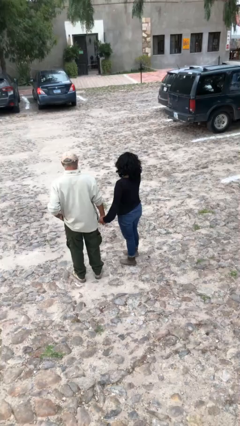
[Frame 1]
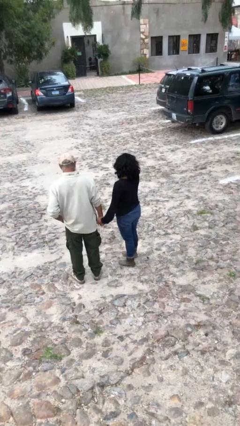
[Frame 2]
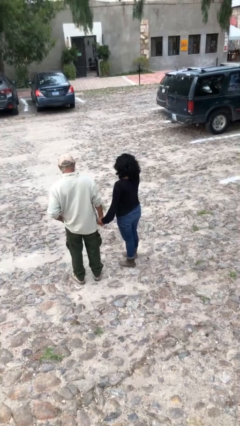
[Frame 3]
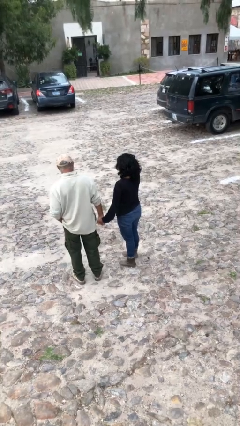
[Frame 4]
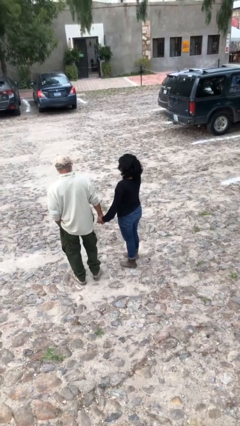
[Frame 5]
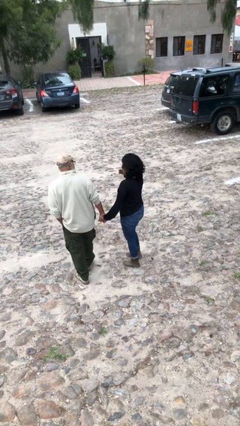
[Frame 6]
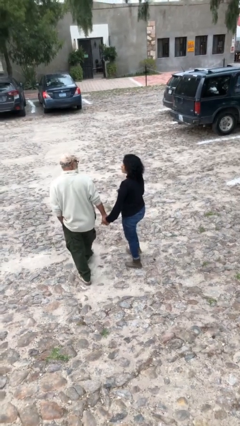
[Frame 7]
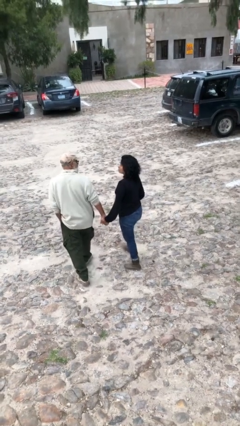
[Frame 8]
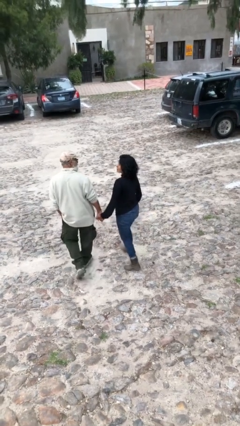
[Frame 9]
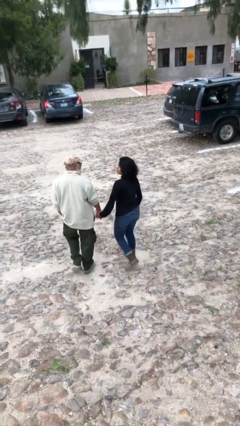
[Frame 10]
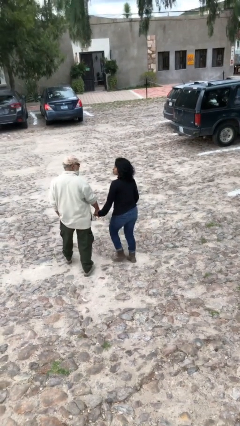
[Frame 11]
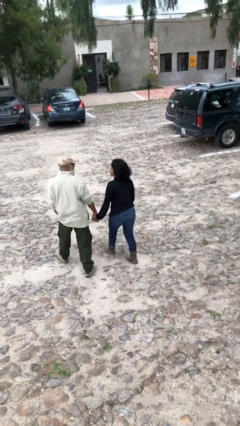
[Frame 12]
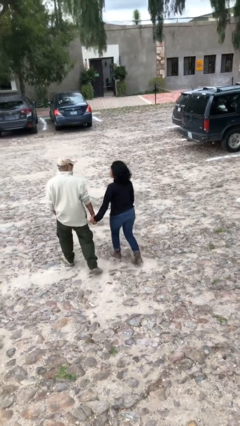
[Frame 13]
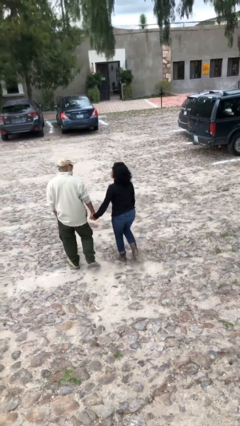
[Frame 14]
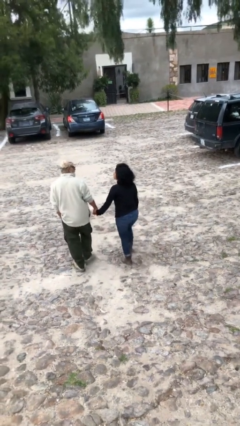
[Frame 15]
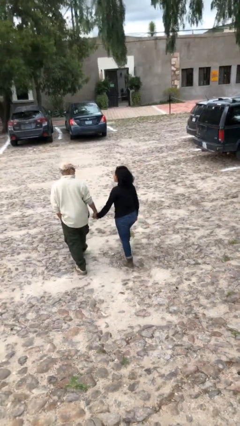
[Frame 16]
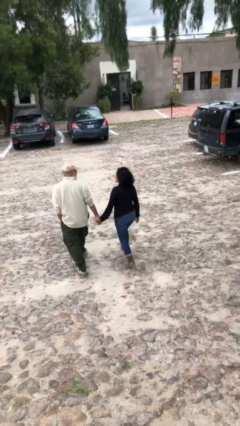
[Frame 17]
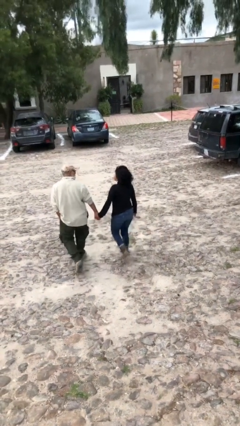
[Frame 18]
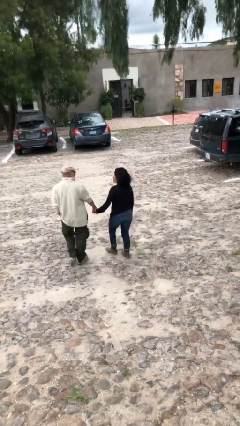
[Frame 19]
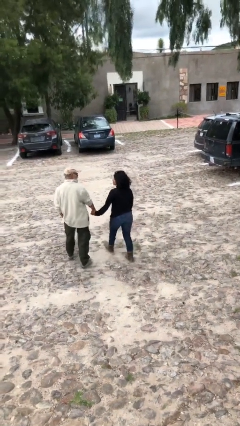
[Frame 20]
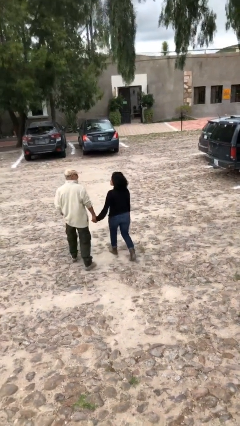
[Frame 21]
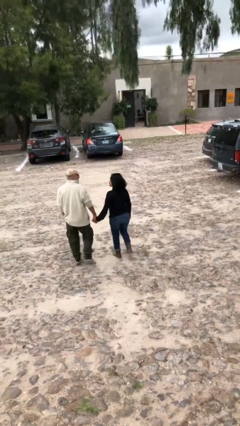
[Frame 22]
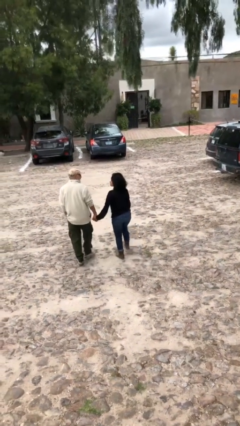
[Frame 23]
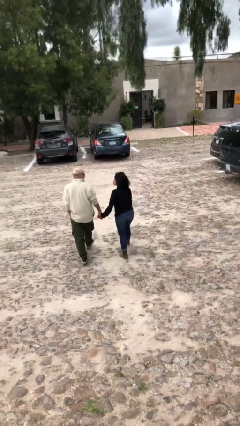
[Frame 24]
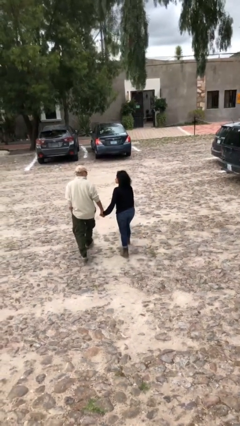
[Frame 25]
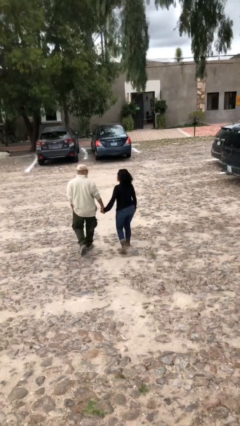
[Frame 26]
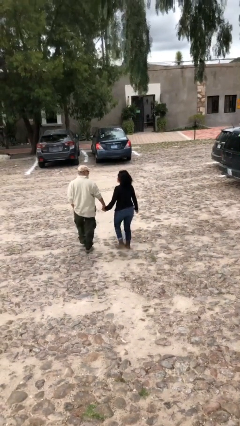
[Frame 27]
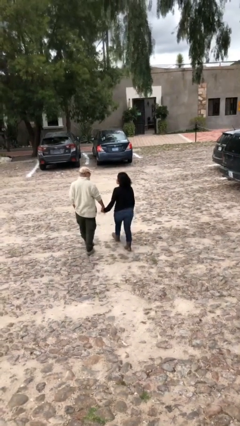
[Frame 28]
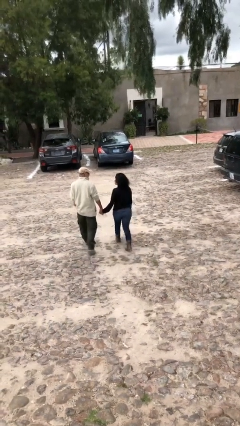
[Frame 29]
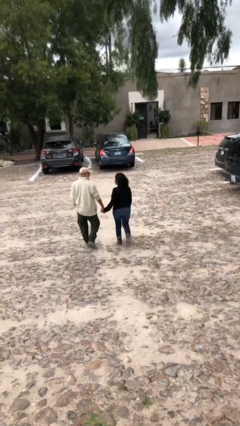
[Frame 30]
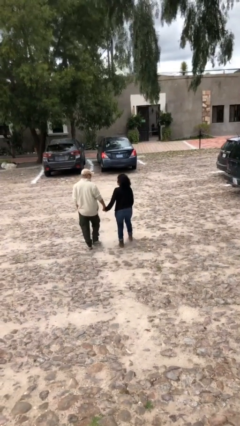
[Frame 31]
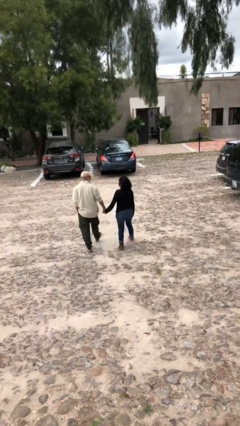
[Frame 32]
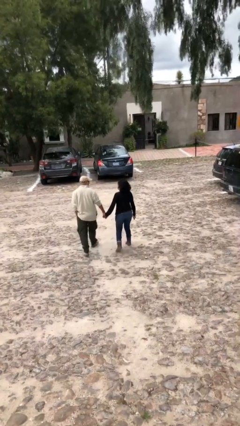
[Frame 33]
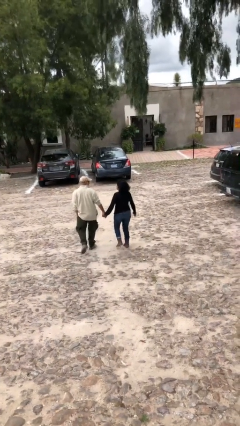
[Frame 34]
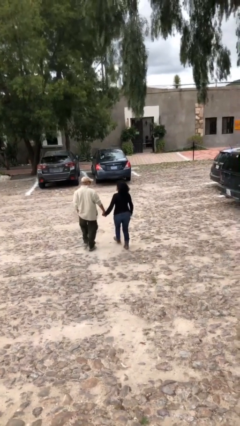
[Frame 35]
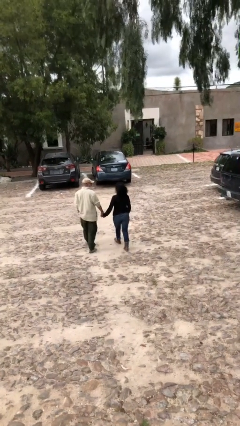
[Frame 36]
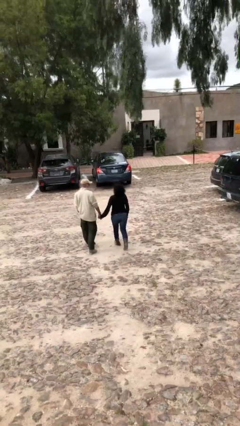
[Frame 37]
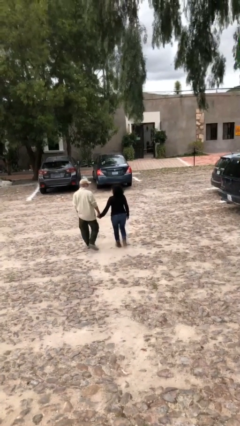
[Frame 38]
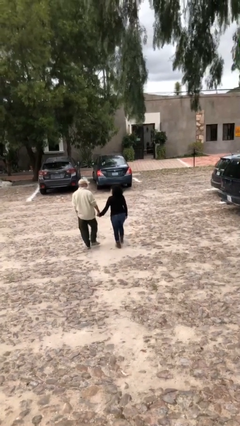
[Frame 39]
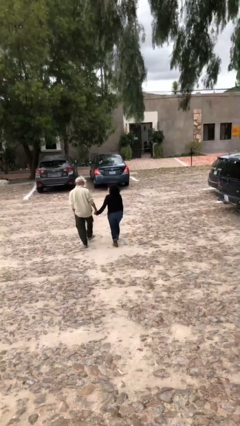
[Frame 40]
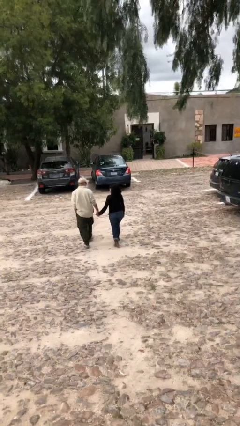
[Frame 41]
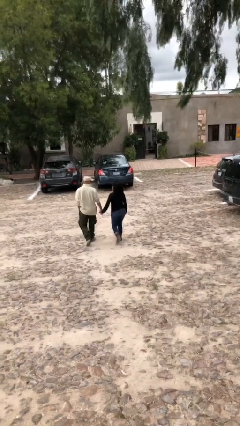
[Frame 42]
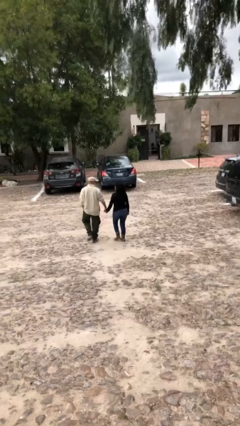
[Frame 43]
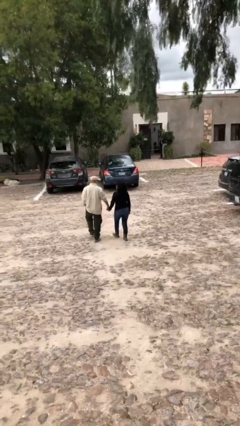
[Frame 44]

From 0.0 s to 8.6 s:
person holds hand

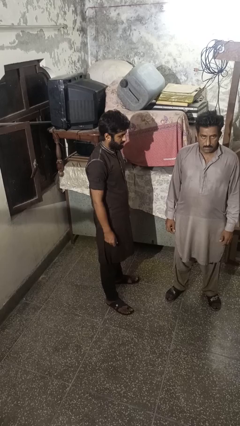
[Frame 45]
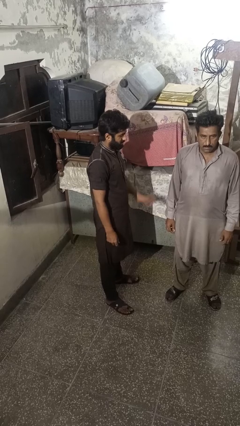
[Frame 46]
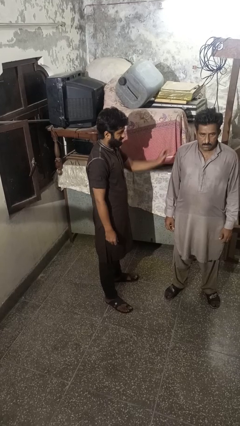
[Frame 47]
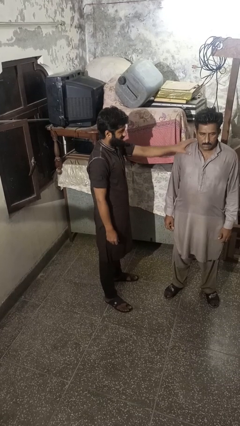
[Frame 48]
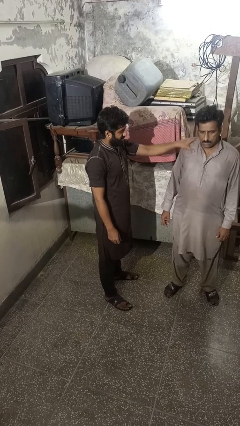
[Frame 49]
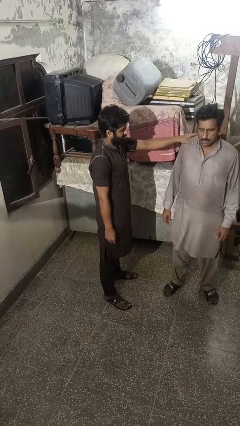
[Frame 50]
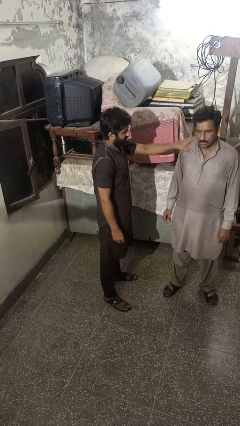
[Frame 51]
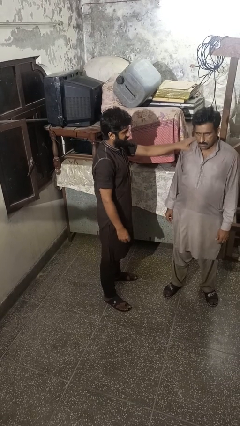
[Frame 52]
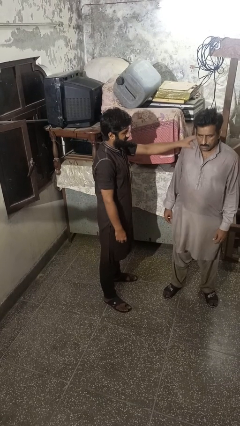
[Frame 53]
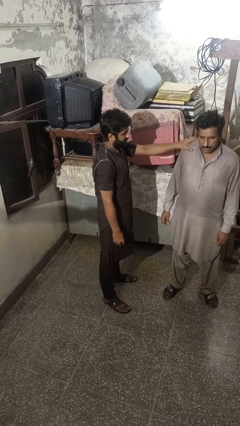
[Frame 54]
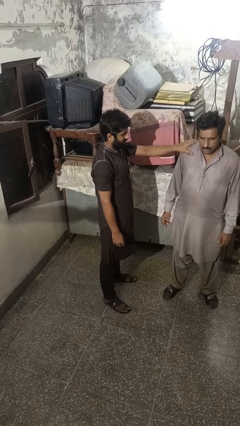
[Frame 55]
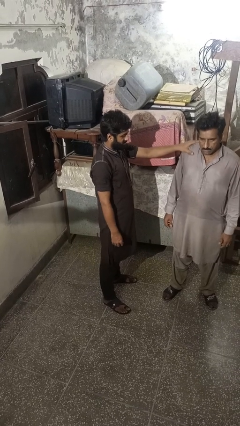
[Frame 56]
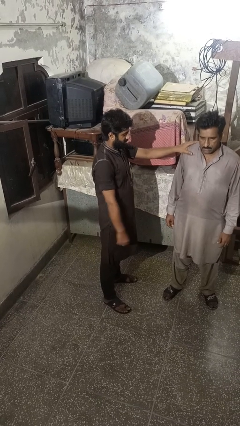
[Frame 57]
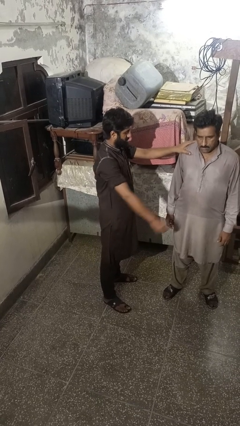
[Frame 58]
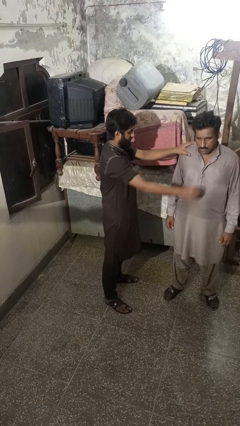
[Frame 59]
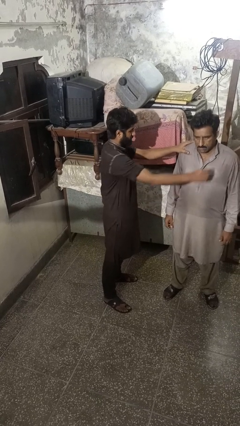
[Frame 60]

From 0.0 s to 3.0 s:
person grabs person by shoulder

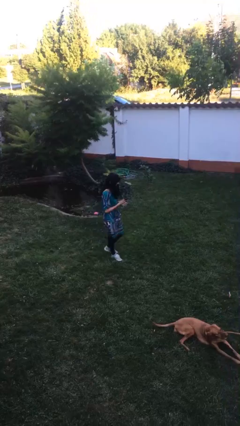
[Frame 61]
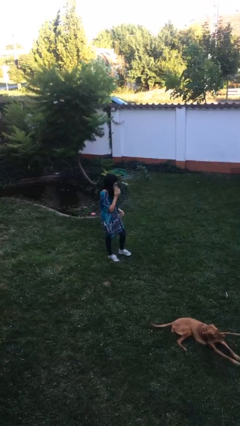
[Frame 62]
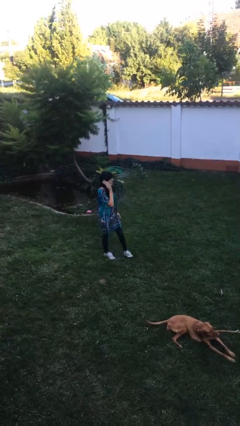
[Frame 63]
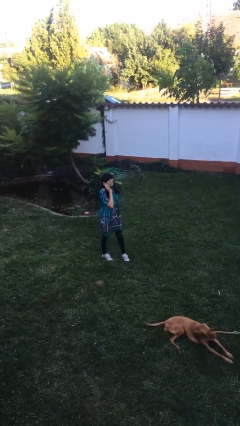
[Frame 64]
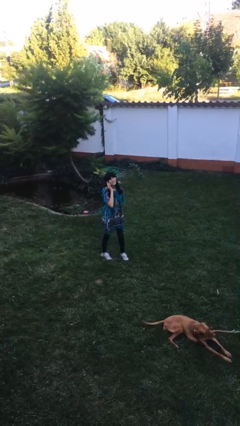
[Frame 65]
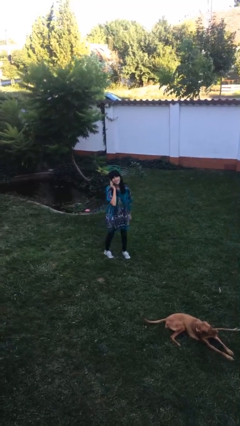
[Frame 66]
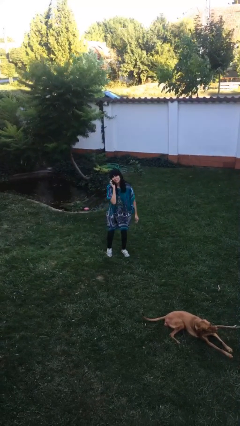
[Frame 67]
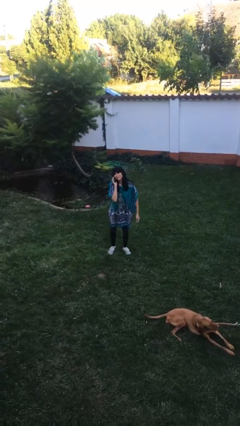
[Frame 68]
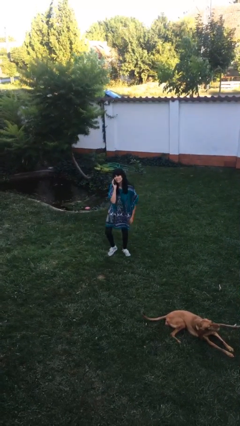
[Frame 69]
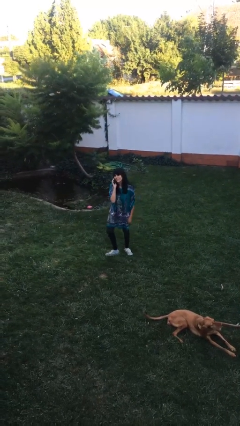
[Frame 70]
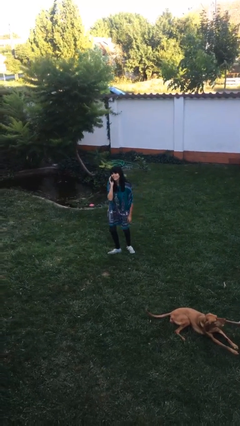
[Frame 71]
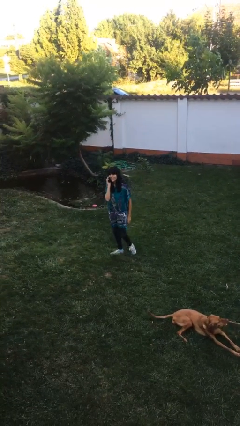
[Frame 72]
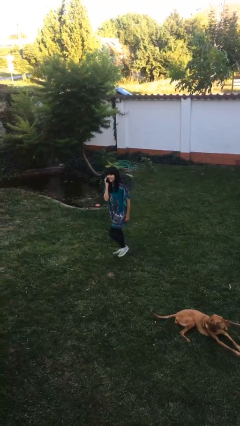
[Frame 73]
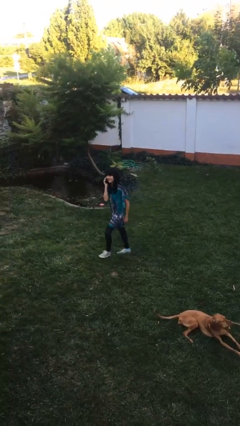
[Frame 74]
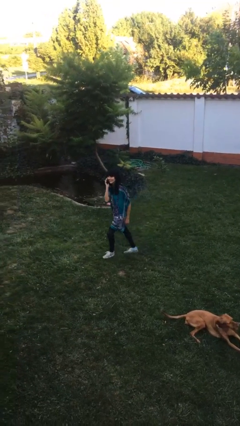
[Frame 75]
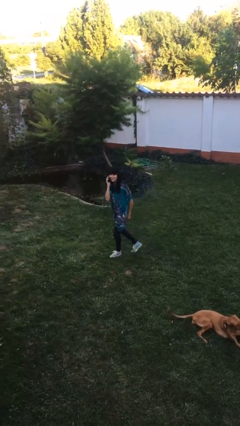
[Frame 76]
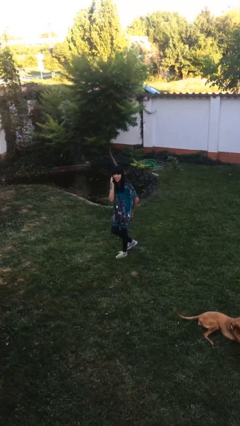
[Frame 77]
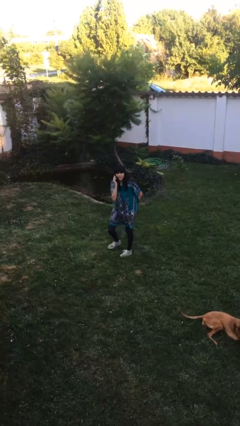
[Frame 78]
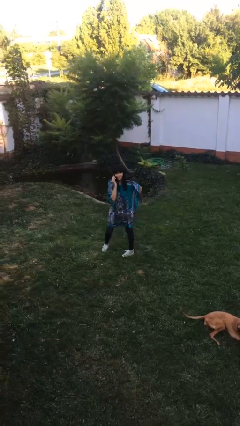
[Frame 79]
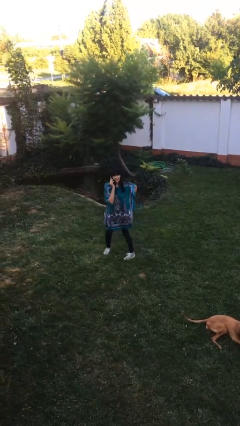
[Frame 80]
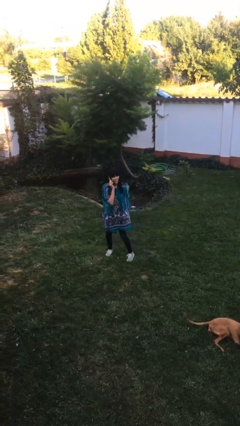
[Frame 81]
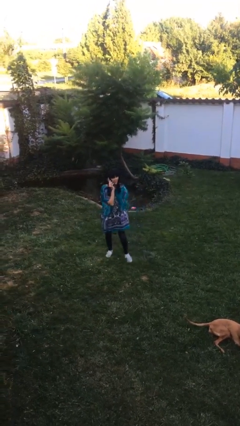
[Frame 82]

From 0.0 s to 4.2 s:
person talks on phone

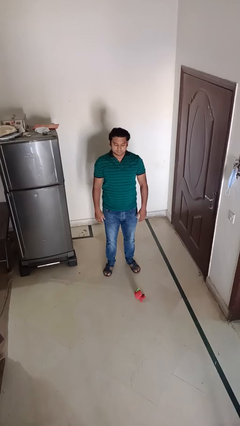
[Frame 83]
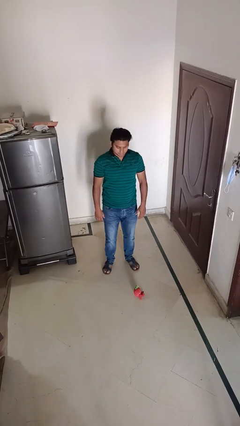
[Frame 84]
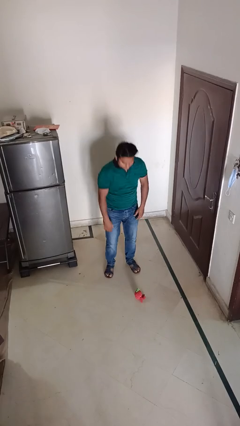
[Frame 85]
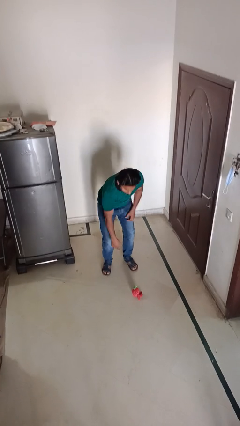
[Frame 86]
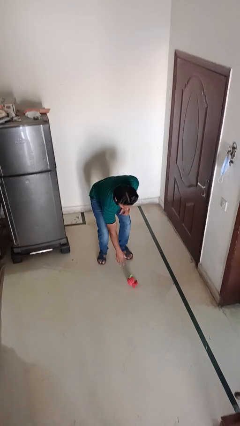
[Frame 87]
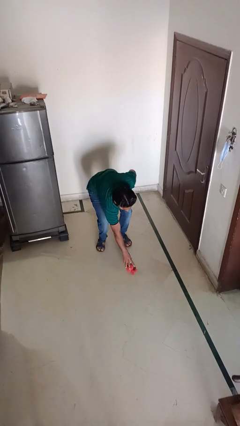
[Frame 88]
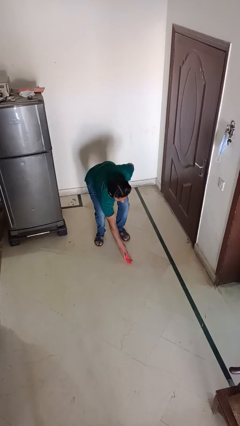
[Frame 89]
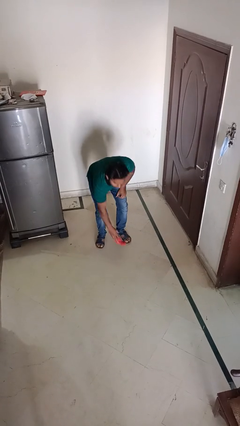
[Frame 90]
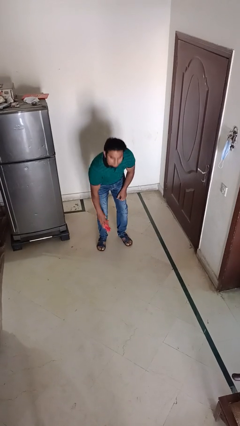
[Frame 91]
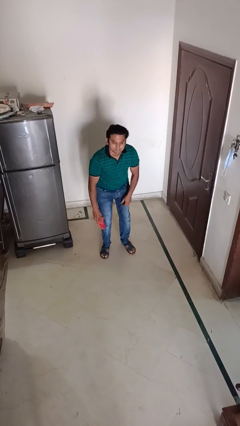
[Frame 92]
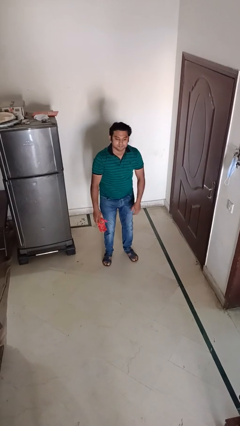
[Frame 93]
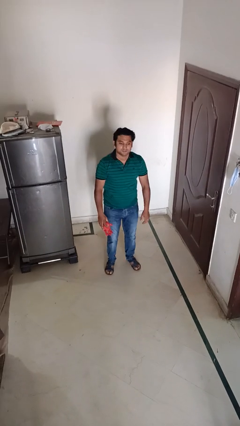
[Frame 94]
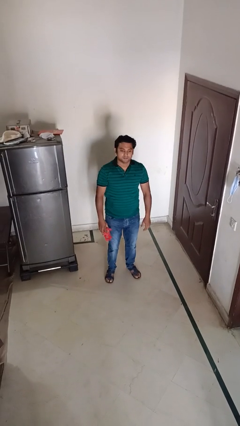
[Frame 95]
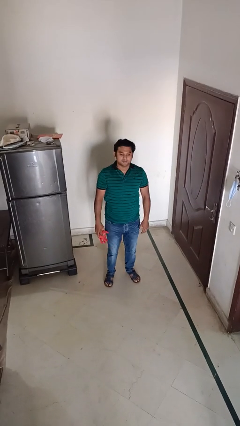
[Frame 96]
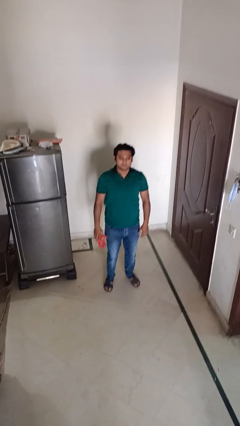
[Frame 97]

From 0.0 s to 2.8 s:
person picks up object from floor
